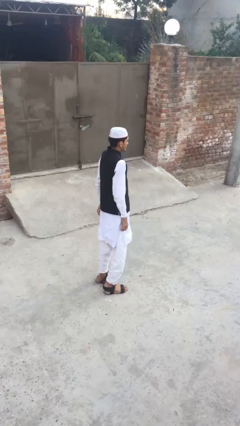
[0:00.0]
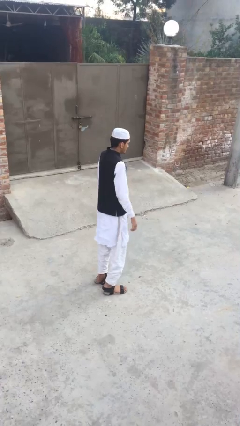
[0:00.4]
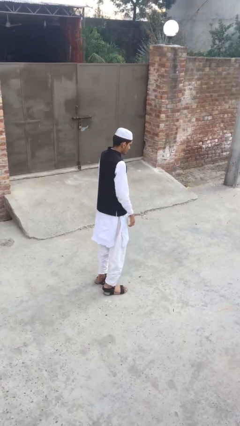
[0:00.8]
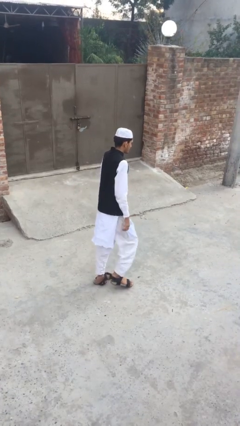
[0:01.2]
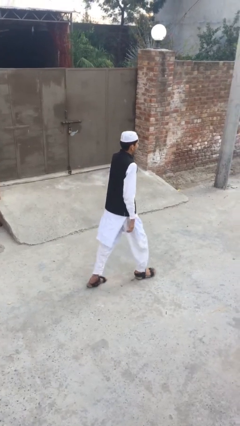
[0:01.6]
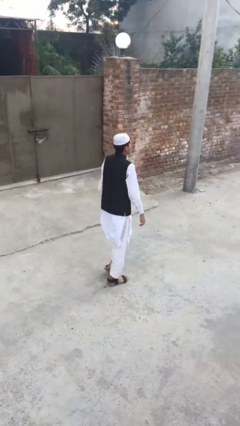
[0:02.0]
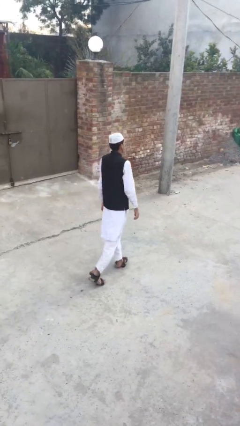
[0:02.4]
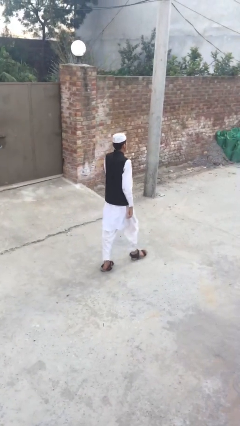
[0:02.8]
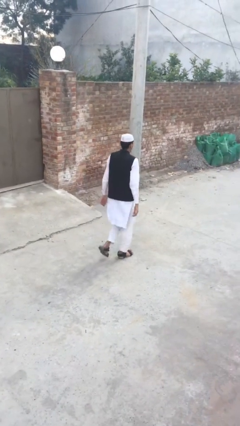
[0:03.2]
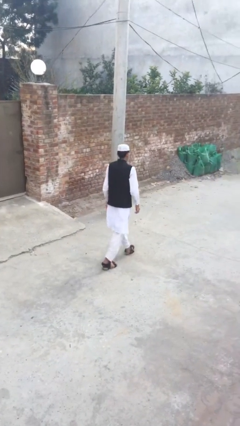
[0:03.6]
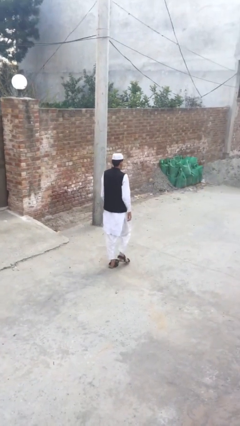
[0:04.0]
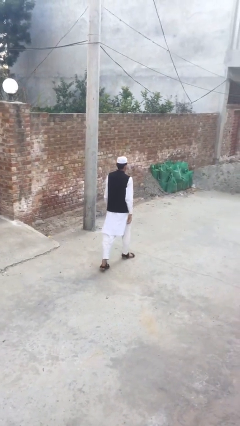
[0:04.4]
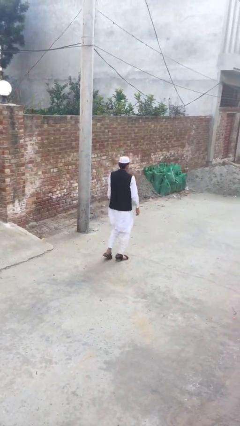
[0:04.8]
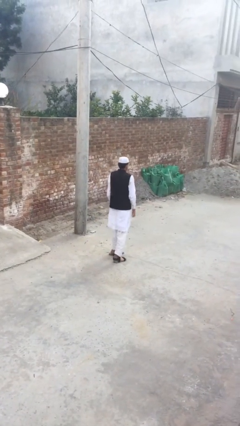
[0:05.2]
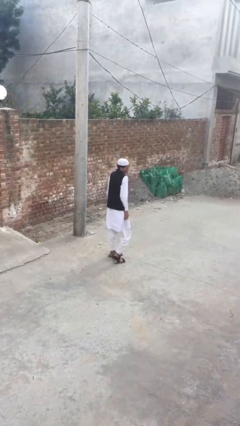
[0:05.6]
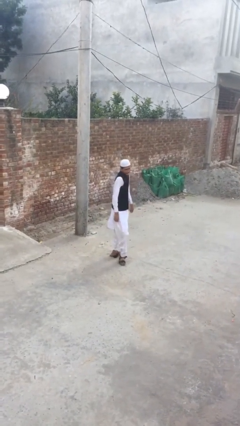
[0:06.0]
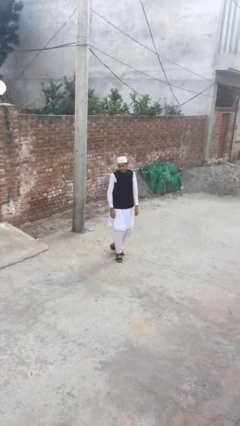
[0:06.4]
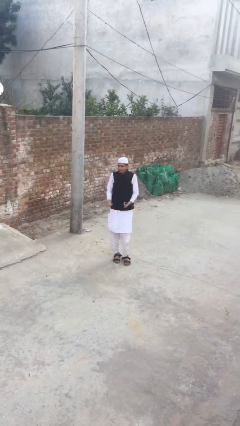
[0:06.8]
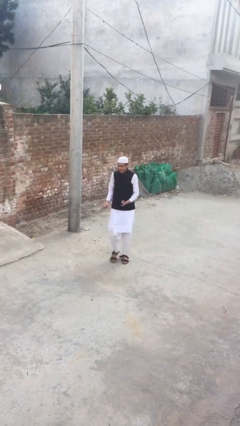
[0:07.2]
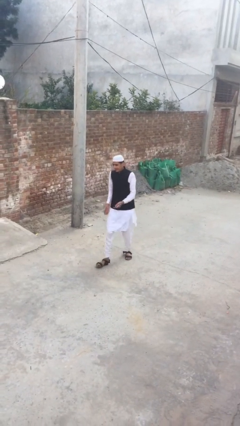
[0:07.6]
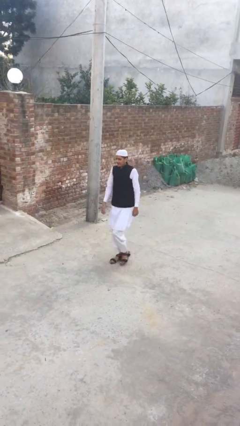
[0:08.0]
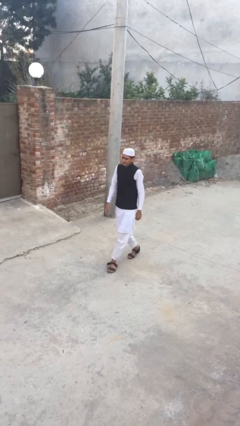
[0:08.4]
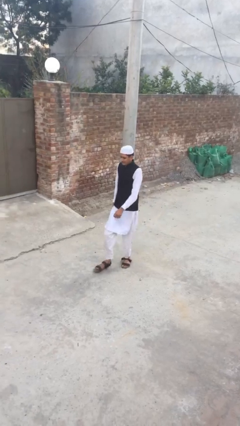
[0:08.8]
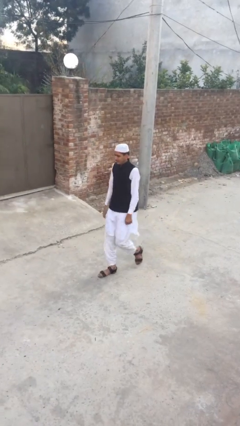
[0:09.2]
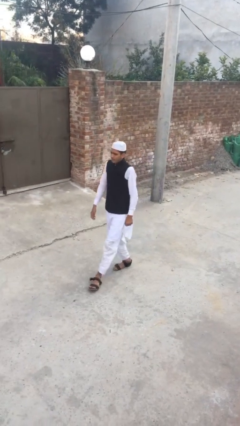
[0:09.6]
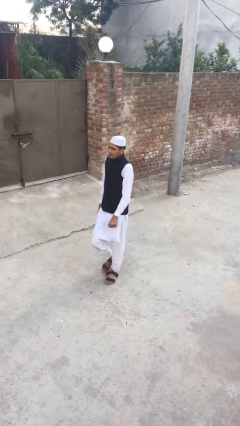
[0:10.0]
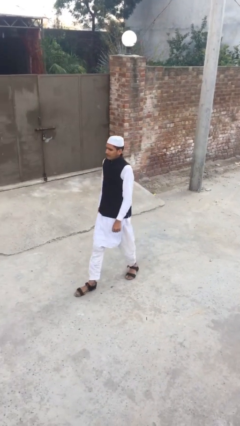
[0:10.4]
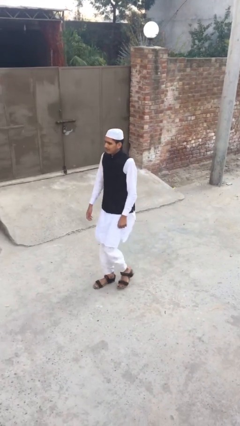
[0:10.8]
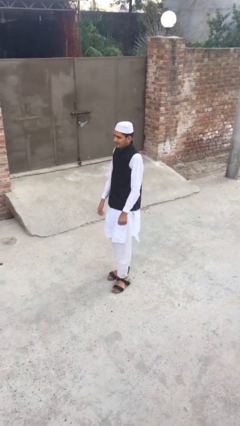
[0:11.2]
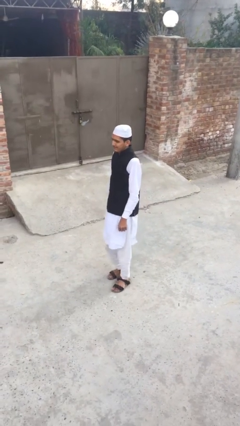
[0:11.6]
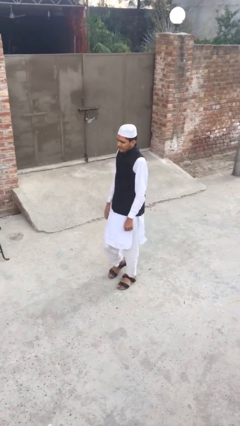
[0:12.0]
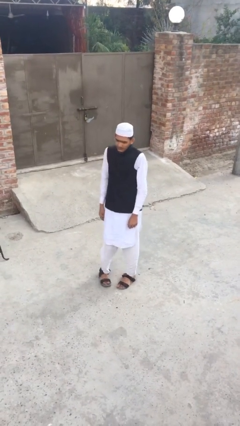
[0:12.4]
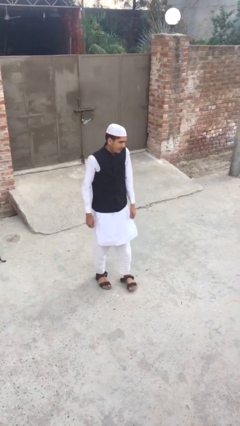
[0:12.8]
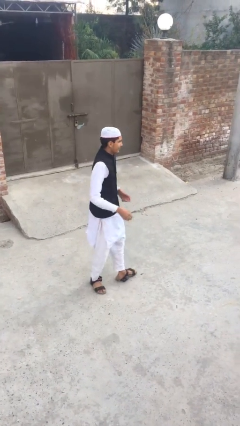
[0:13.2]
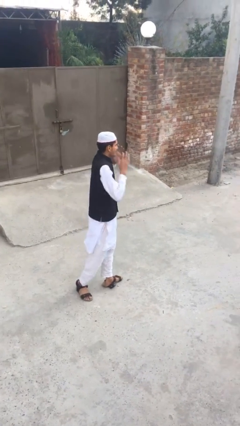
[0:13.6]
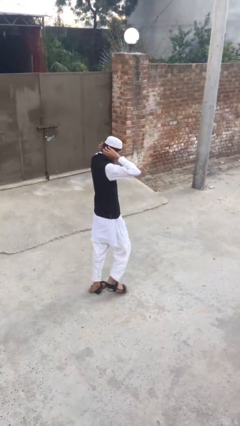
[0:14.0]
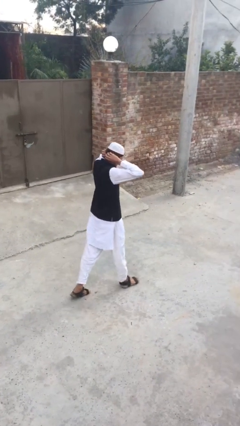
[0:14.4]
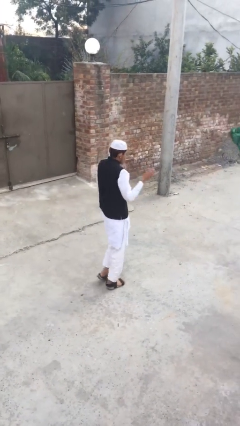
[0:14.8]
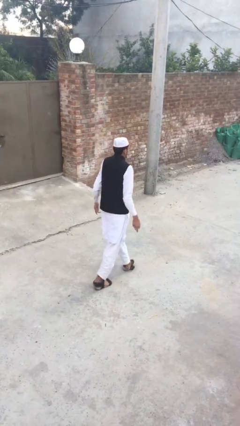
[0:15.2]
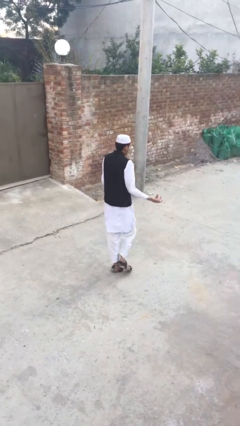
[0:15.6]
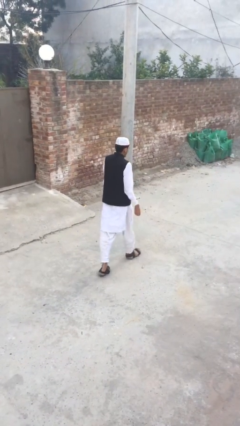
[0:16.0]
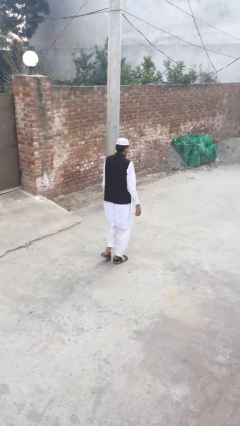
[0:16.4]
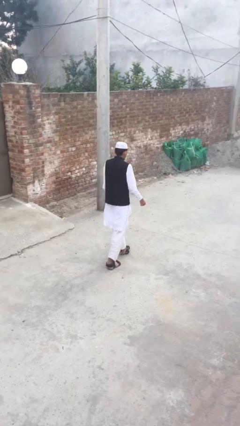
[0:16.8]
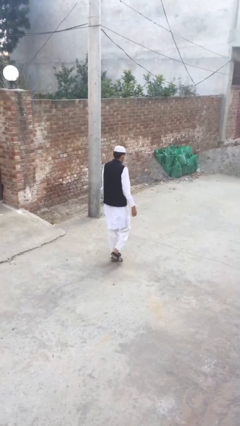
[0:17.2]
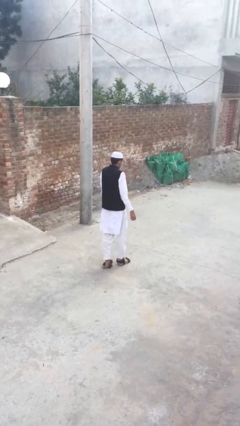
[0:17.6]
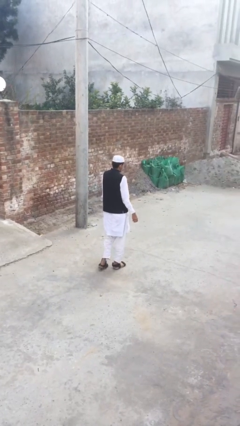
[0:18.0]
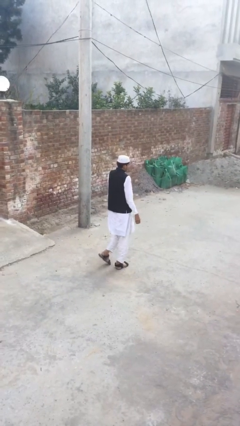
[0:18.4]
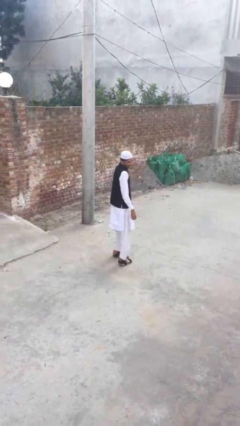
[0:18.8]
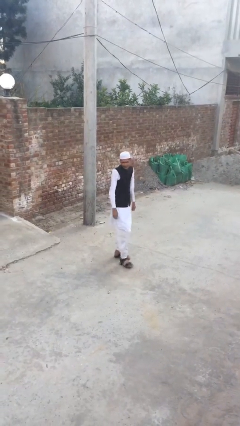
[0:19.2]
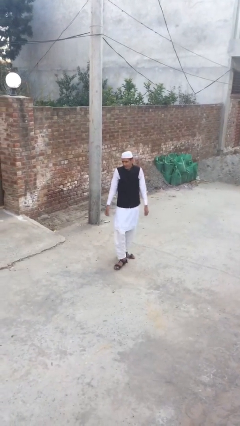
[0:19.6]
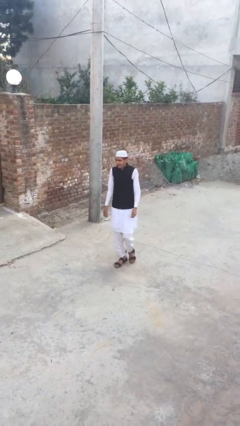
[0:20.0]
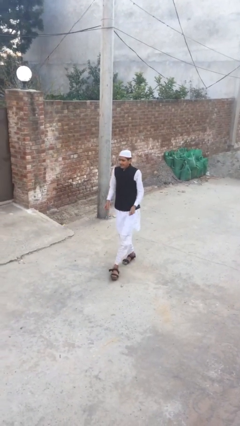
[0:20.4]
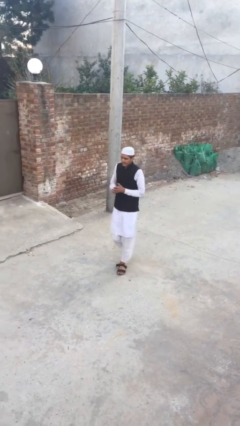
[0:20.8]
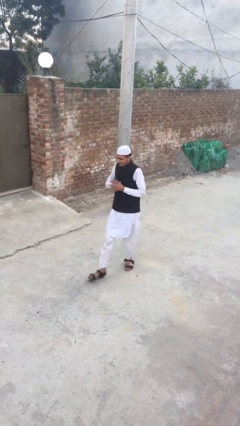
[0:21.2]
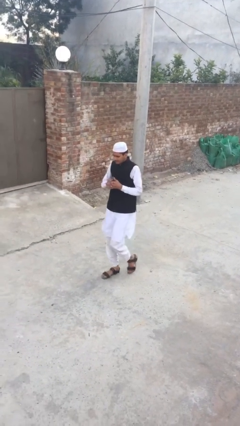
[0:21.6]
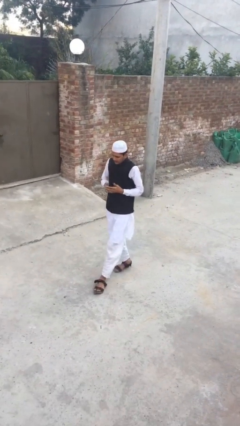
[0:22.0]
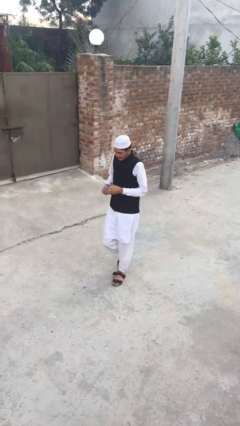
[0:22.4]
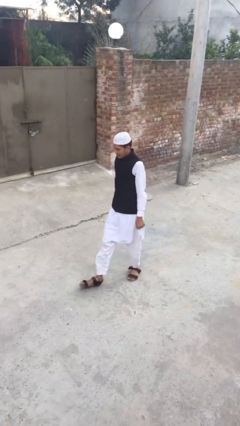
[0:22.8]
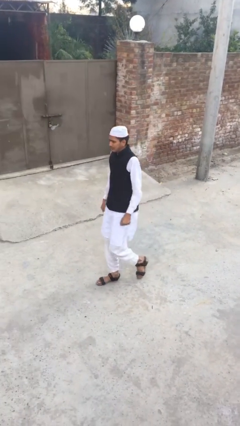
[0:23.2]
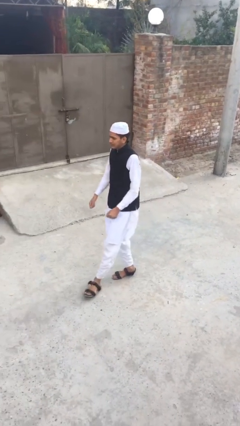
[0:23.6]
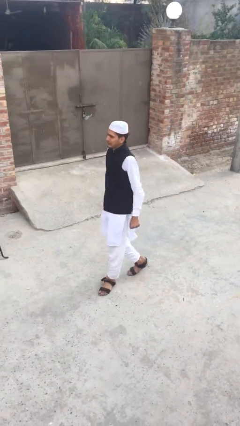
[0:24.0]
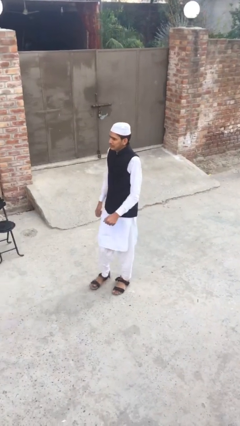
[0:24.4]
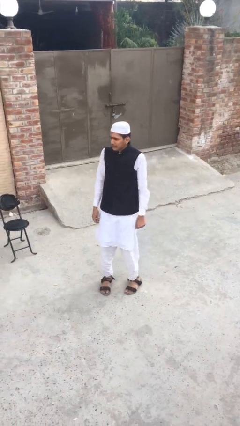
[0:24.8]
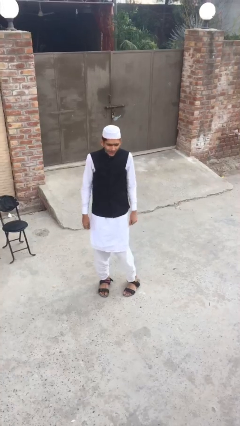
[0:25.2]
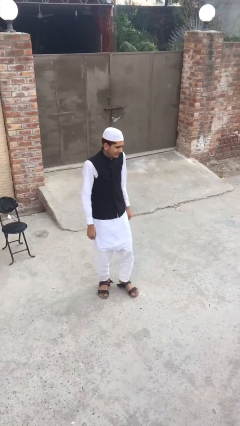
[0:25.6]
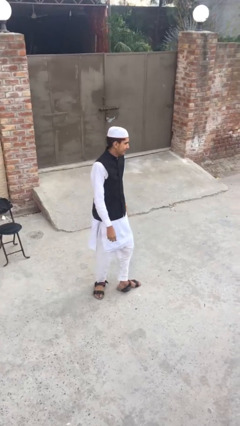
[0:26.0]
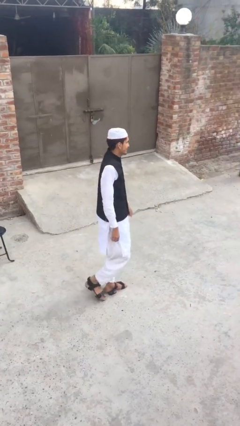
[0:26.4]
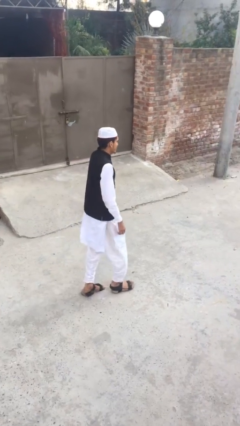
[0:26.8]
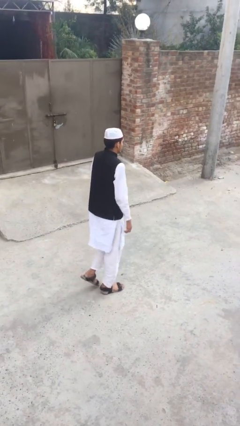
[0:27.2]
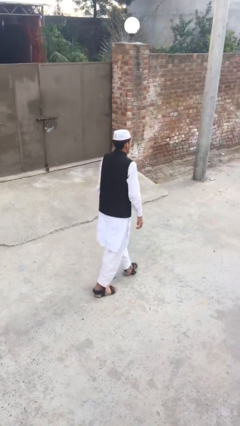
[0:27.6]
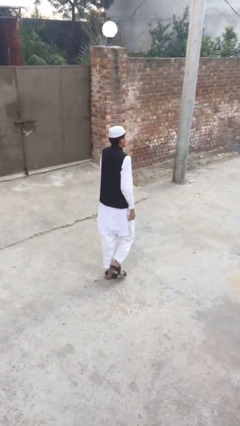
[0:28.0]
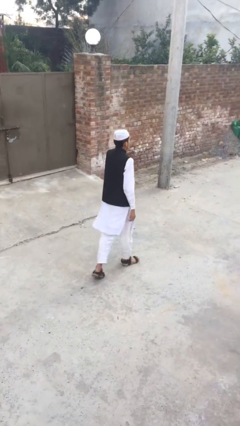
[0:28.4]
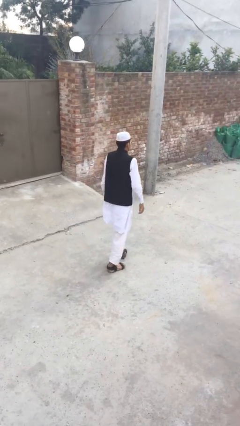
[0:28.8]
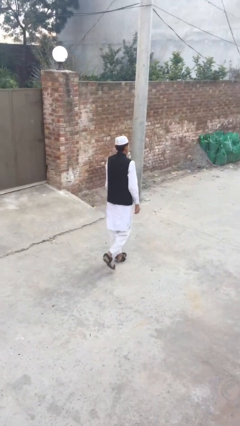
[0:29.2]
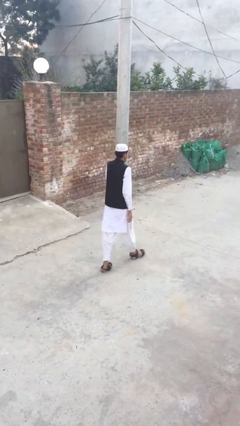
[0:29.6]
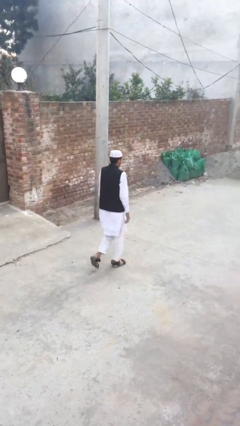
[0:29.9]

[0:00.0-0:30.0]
person walks

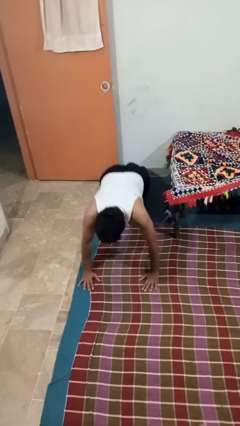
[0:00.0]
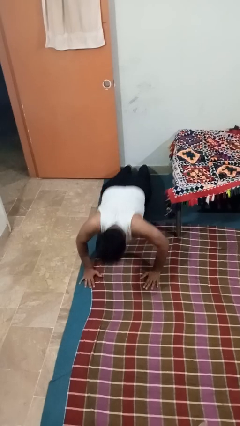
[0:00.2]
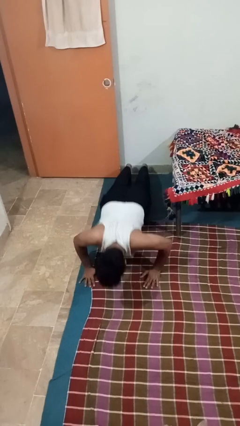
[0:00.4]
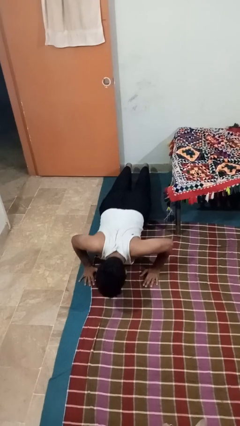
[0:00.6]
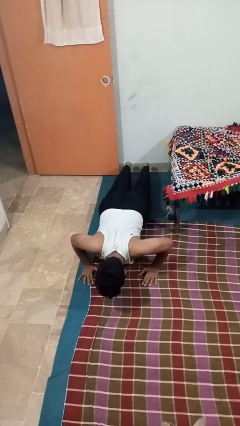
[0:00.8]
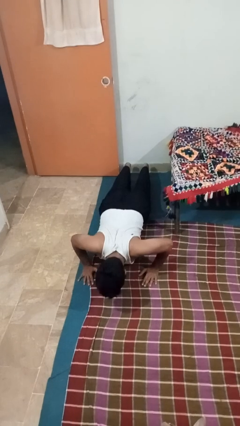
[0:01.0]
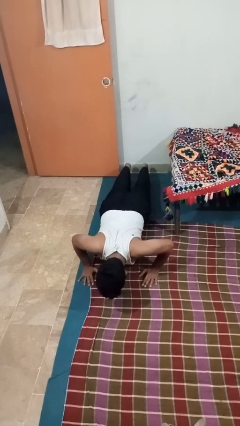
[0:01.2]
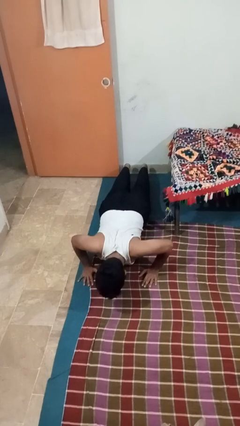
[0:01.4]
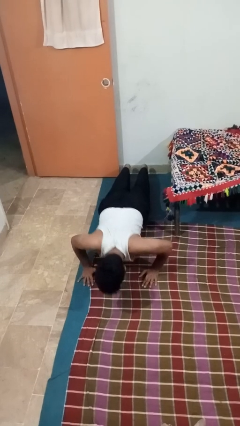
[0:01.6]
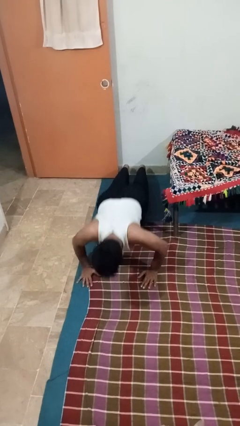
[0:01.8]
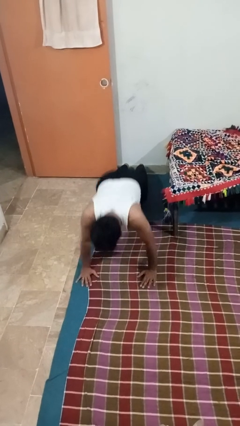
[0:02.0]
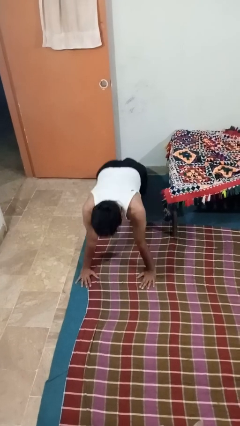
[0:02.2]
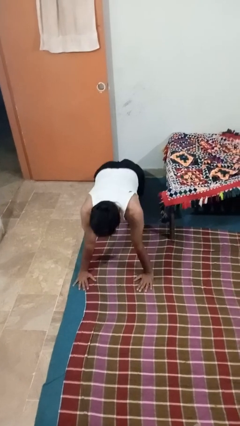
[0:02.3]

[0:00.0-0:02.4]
person exercises with pushup

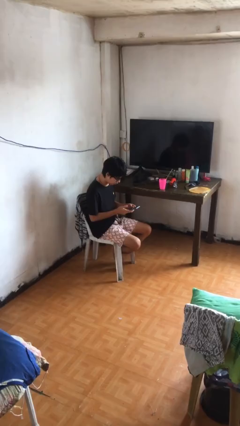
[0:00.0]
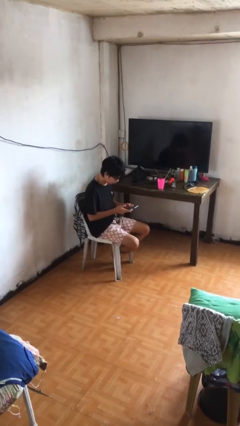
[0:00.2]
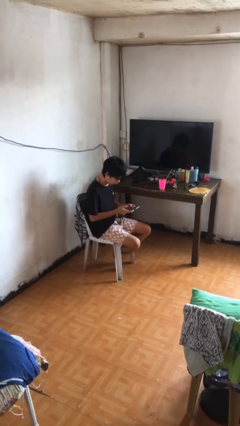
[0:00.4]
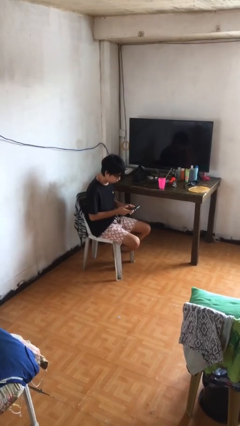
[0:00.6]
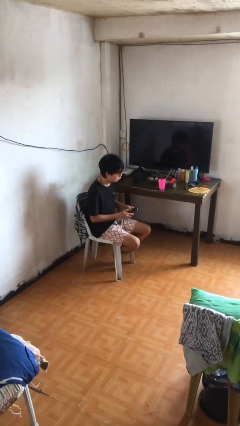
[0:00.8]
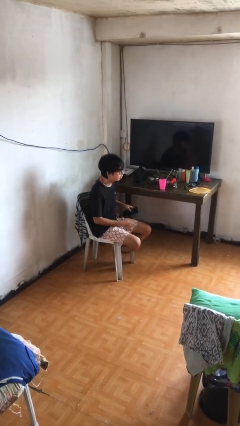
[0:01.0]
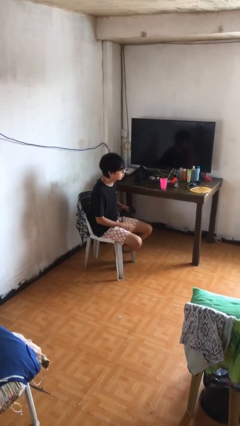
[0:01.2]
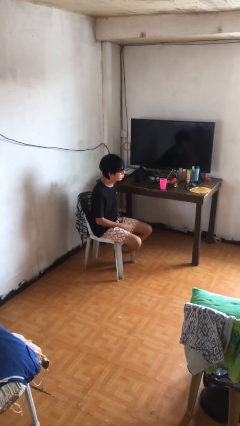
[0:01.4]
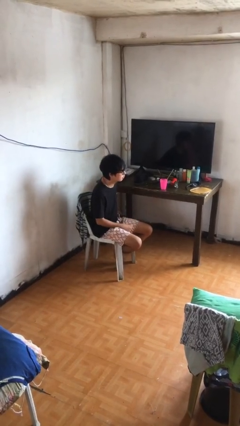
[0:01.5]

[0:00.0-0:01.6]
person puts phone into pocket
